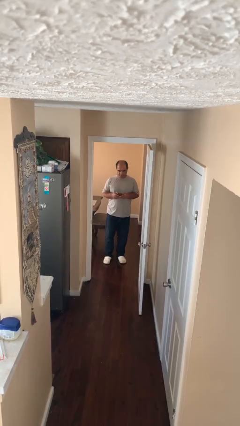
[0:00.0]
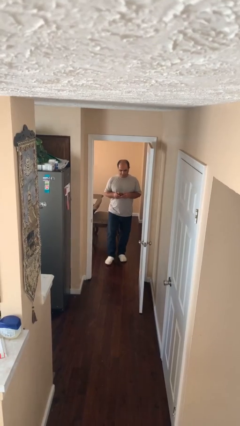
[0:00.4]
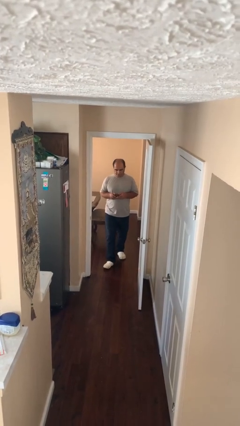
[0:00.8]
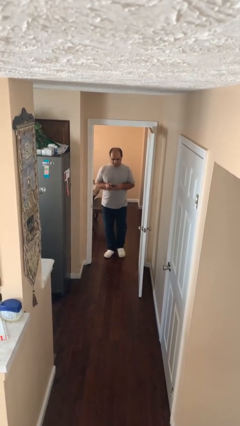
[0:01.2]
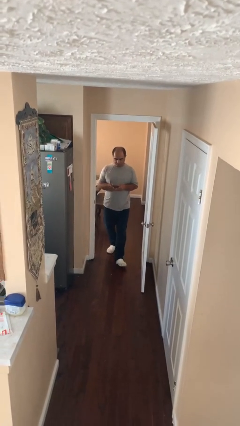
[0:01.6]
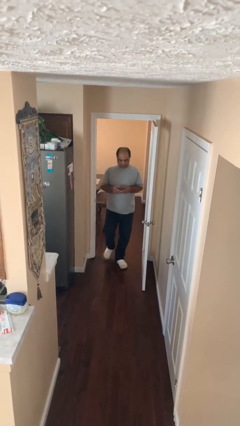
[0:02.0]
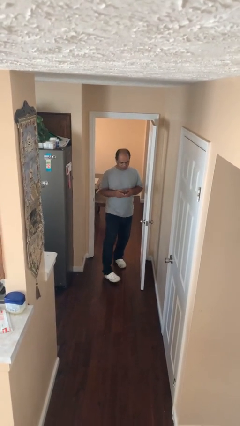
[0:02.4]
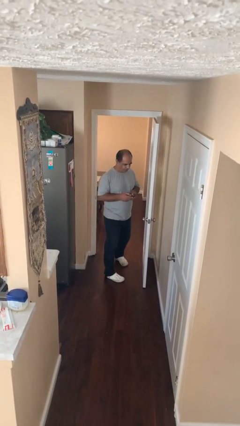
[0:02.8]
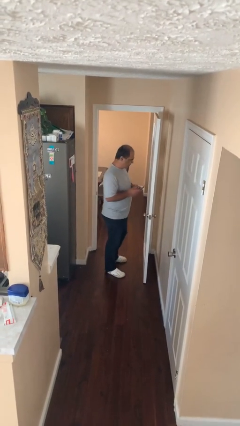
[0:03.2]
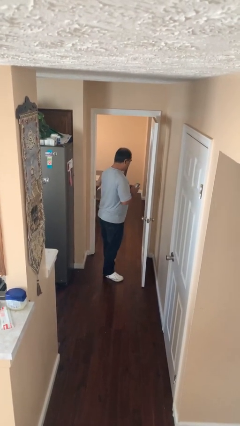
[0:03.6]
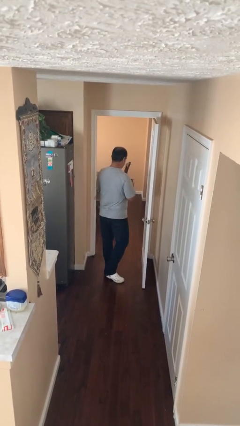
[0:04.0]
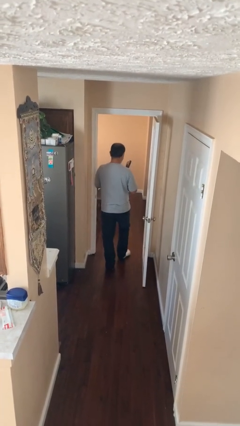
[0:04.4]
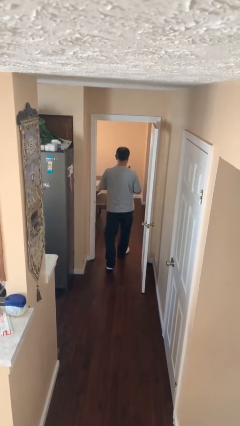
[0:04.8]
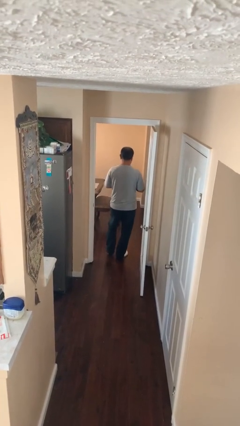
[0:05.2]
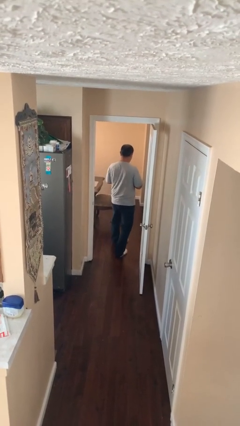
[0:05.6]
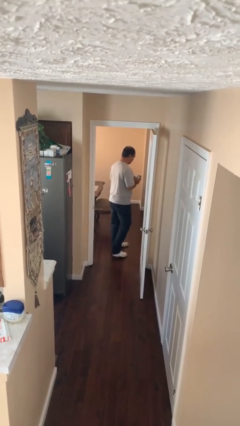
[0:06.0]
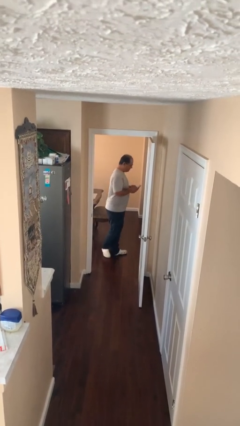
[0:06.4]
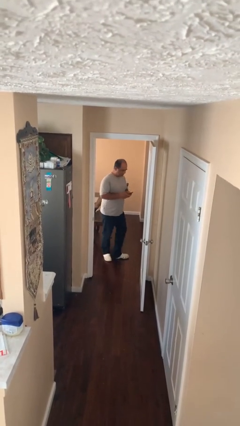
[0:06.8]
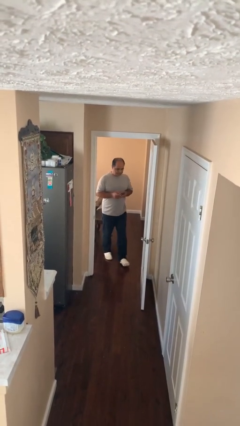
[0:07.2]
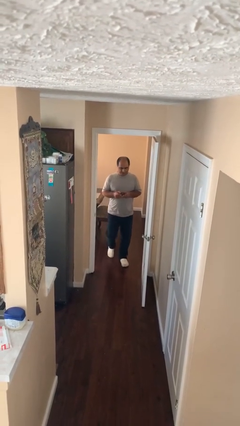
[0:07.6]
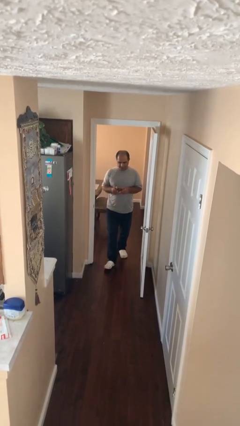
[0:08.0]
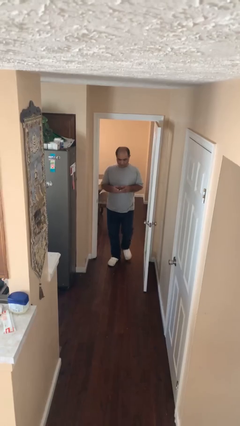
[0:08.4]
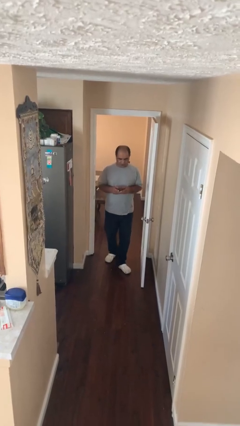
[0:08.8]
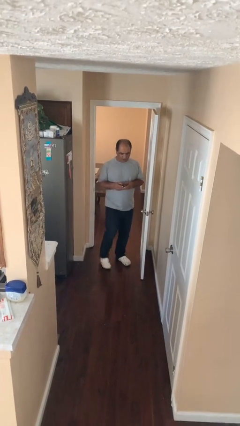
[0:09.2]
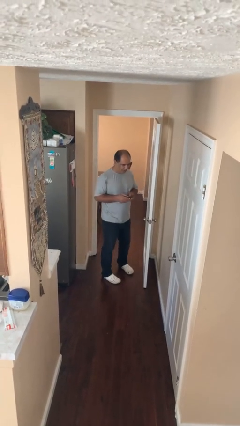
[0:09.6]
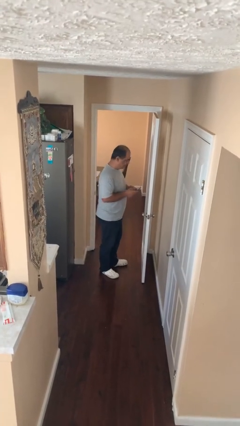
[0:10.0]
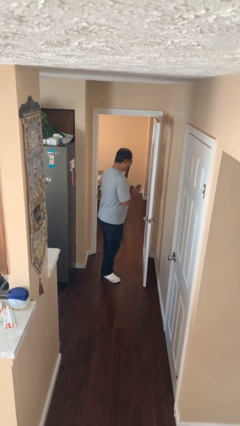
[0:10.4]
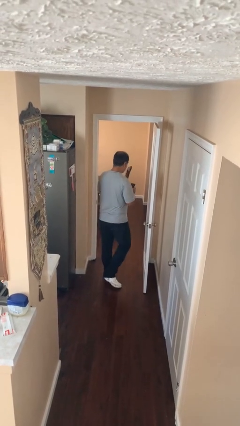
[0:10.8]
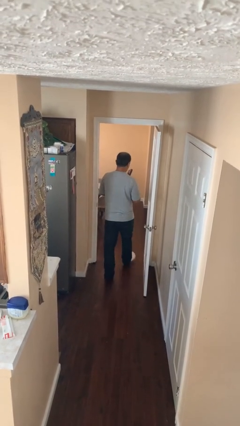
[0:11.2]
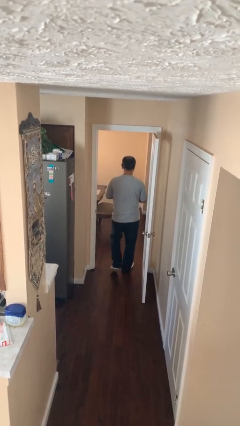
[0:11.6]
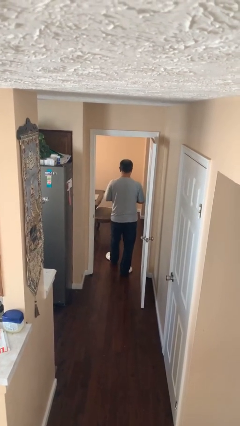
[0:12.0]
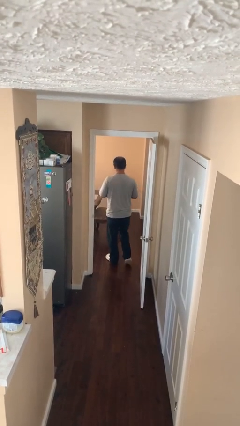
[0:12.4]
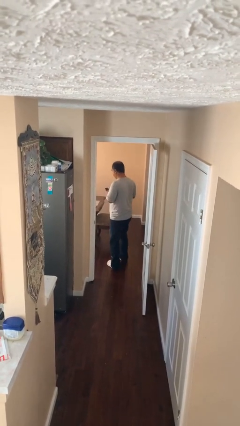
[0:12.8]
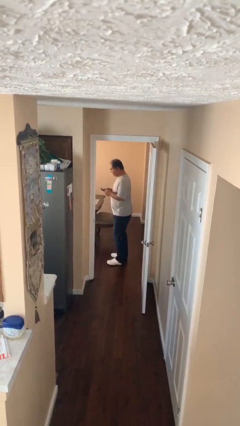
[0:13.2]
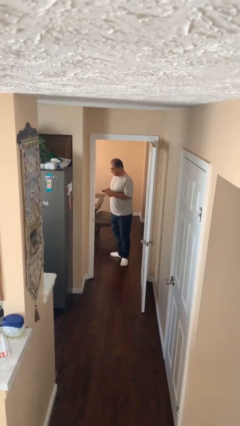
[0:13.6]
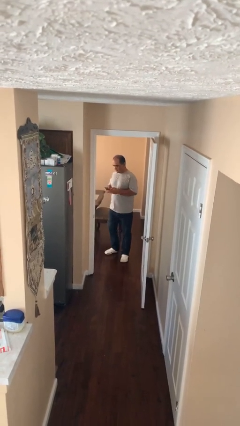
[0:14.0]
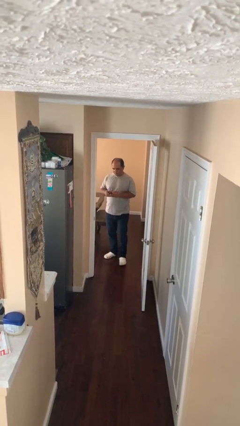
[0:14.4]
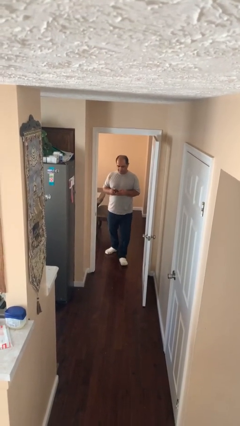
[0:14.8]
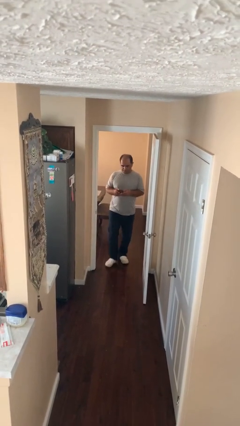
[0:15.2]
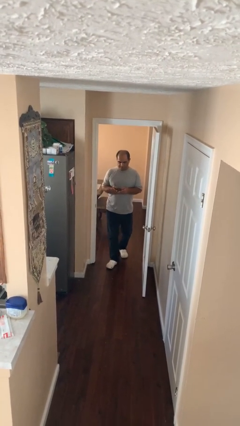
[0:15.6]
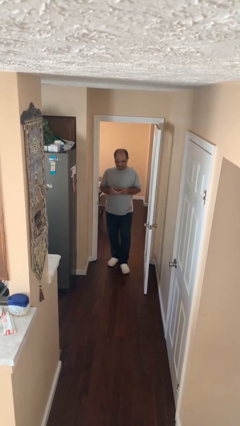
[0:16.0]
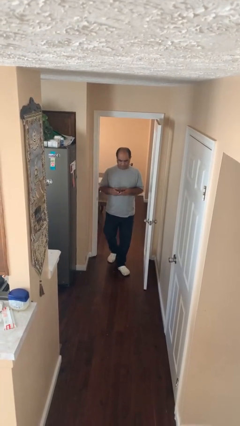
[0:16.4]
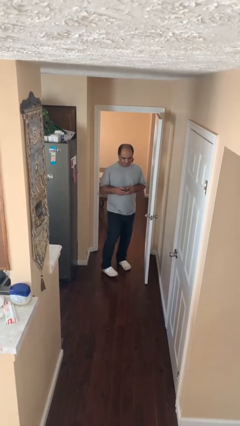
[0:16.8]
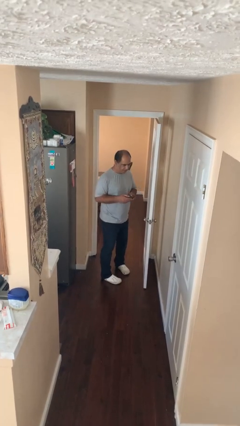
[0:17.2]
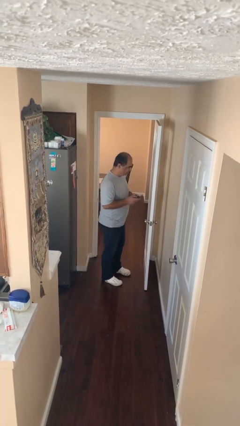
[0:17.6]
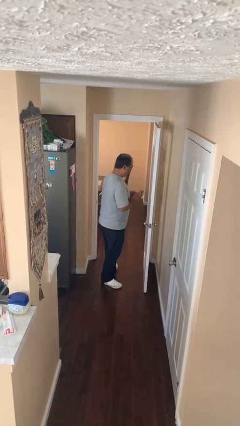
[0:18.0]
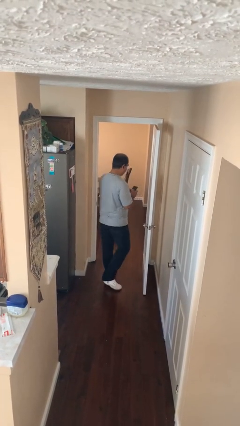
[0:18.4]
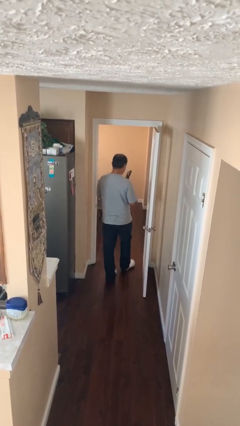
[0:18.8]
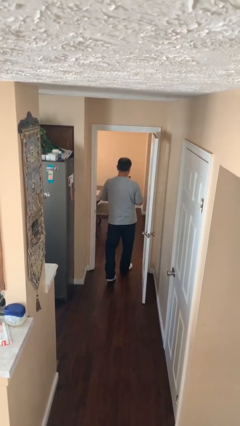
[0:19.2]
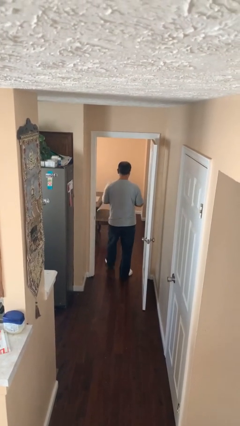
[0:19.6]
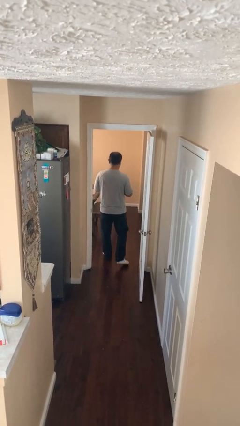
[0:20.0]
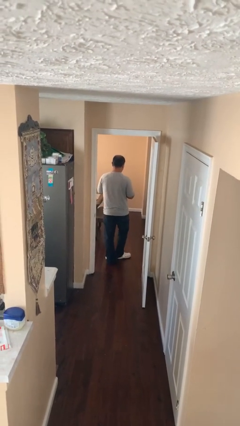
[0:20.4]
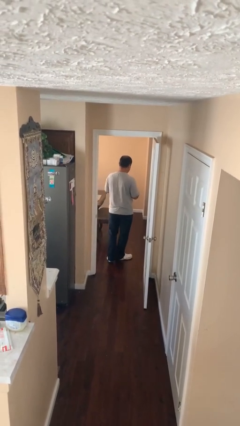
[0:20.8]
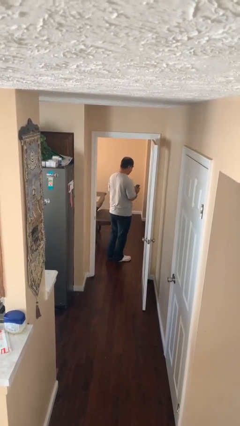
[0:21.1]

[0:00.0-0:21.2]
person texts on phone

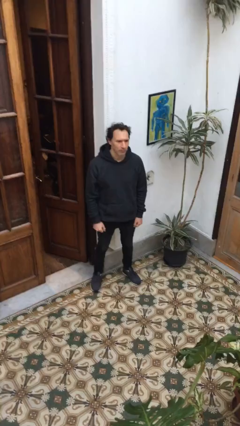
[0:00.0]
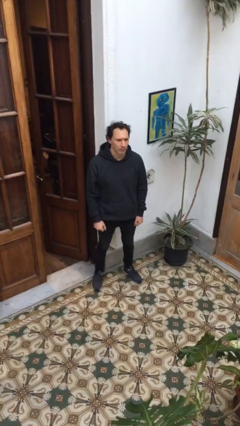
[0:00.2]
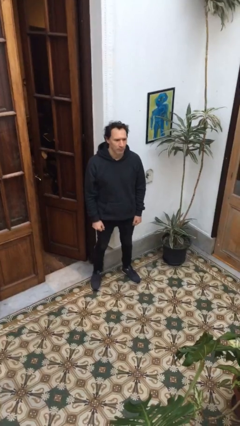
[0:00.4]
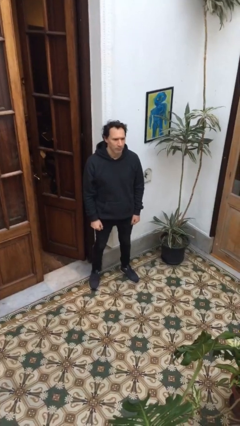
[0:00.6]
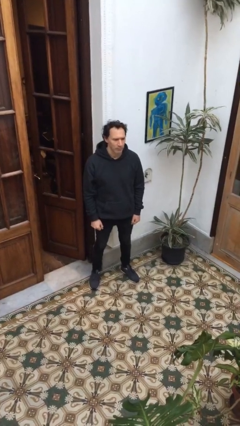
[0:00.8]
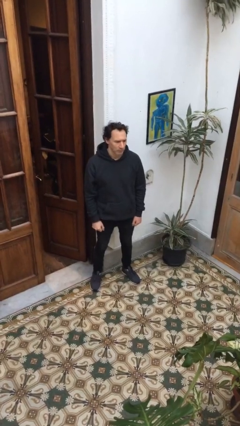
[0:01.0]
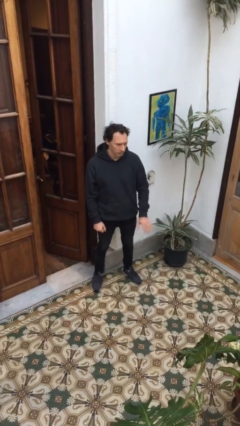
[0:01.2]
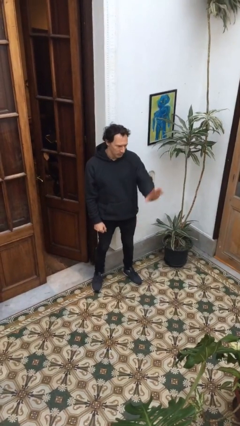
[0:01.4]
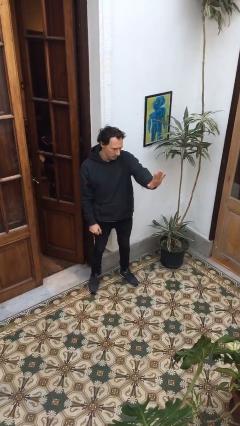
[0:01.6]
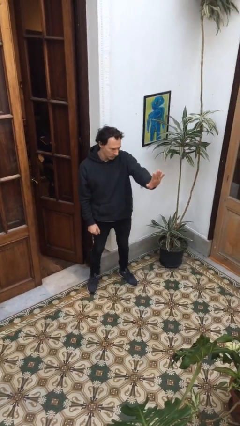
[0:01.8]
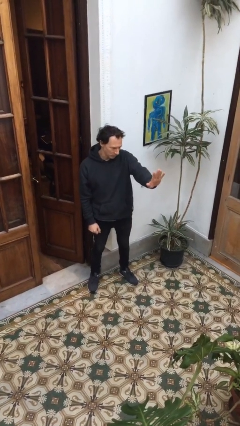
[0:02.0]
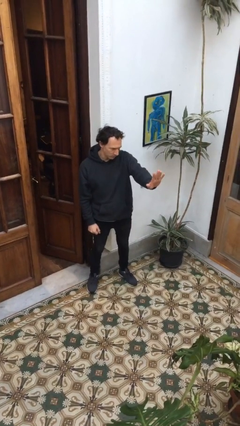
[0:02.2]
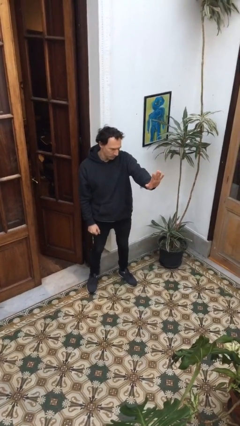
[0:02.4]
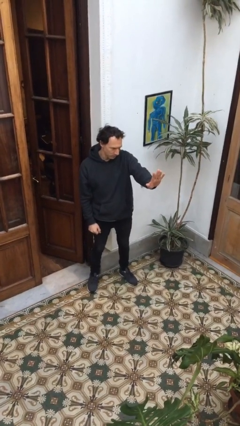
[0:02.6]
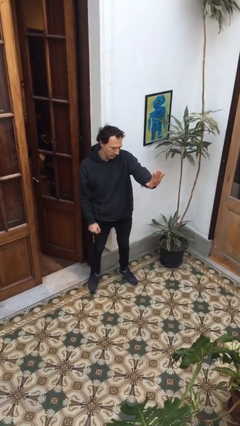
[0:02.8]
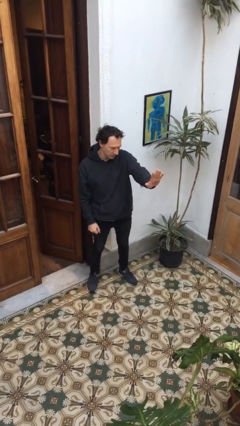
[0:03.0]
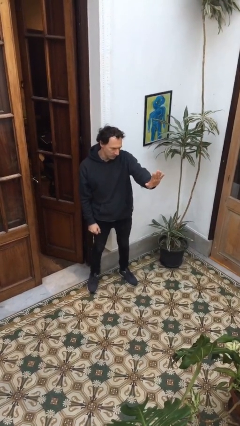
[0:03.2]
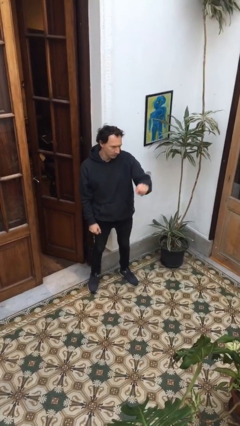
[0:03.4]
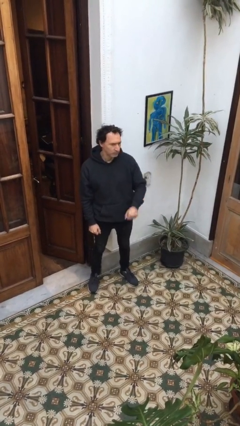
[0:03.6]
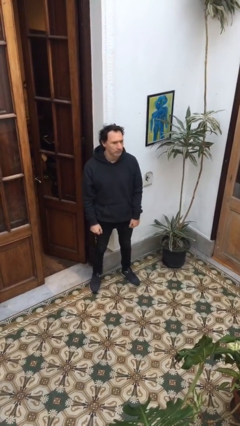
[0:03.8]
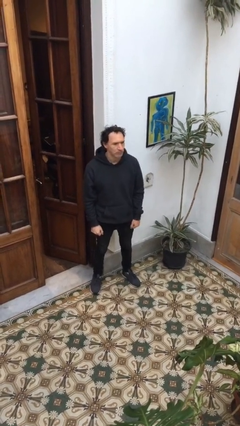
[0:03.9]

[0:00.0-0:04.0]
person gestures stop

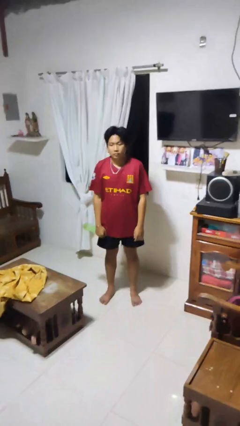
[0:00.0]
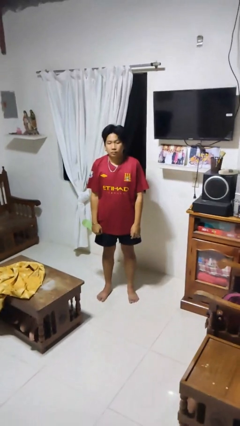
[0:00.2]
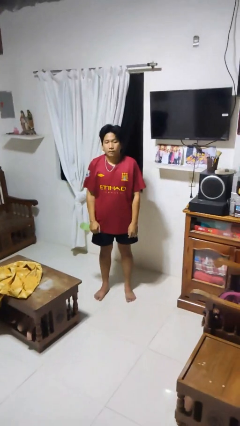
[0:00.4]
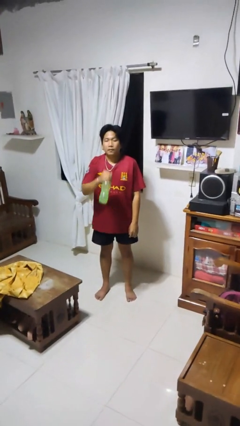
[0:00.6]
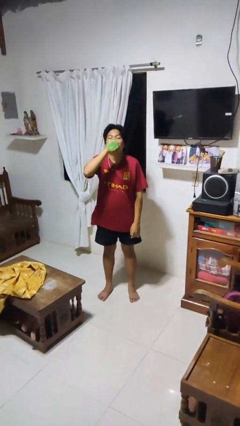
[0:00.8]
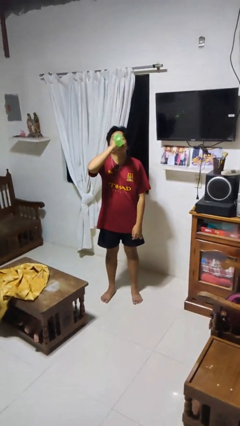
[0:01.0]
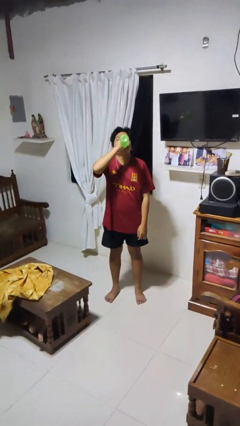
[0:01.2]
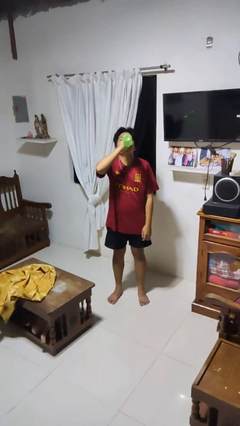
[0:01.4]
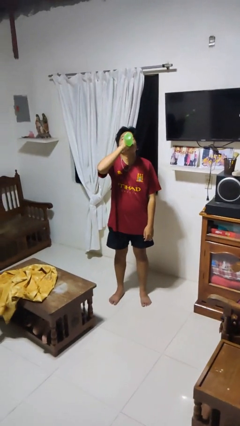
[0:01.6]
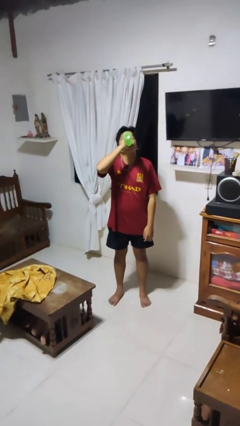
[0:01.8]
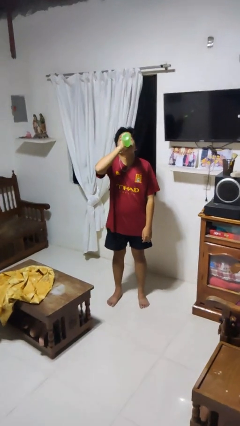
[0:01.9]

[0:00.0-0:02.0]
person drinks from bottle

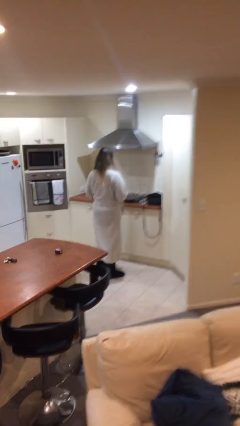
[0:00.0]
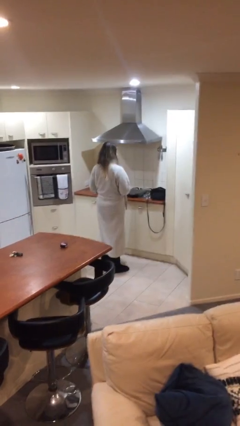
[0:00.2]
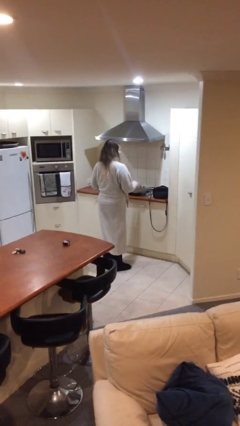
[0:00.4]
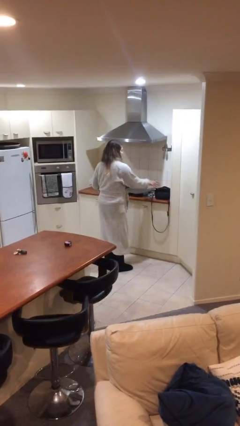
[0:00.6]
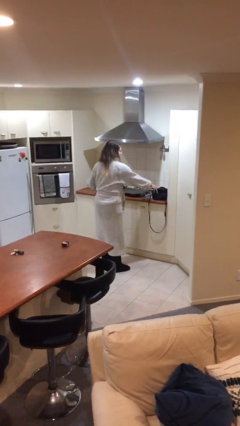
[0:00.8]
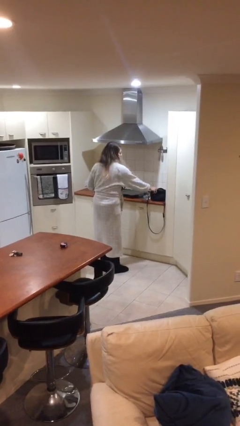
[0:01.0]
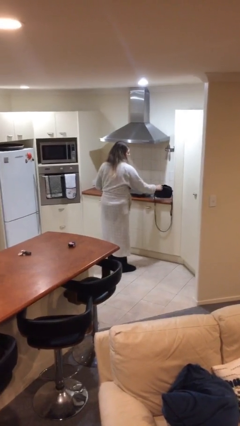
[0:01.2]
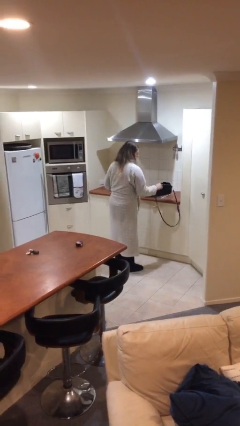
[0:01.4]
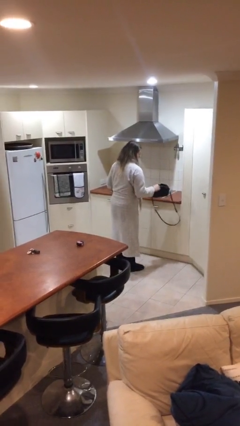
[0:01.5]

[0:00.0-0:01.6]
person picks up object from table
